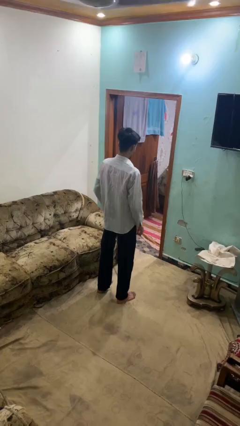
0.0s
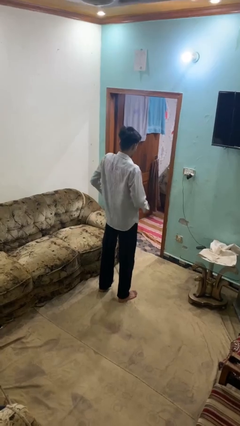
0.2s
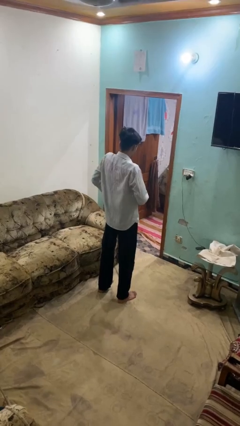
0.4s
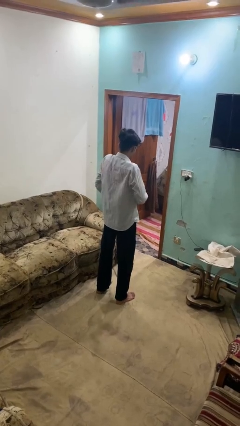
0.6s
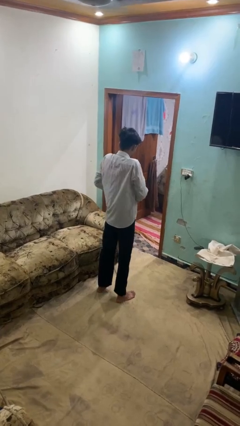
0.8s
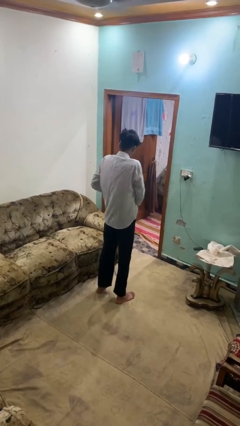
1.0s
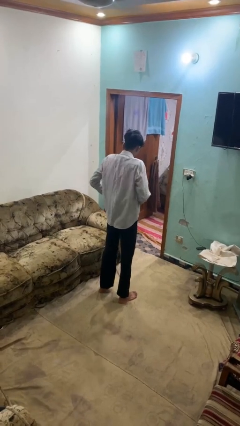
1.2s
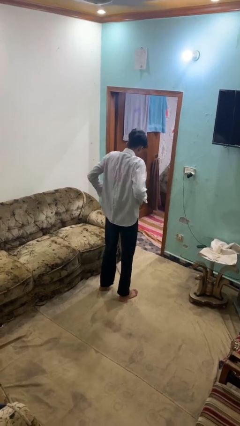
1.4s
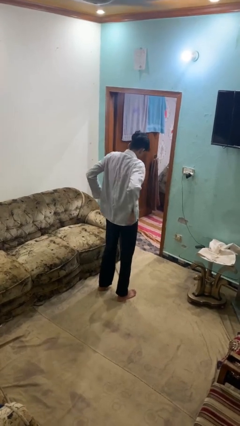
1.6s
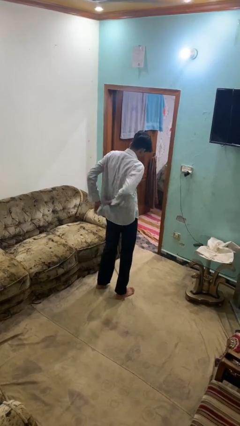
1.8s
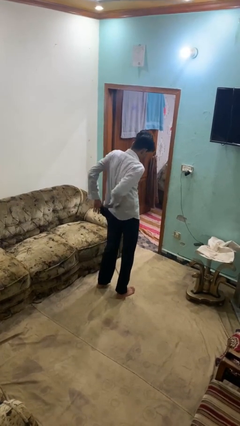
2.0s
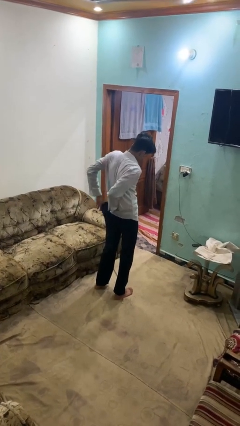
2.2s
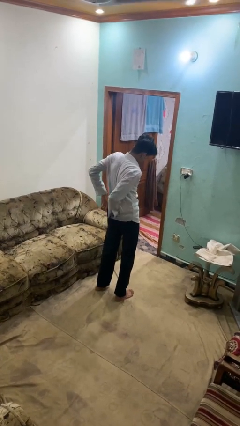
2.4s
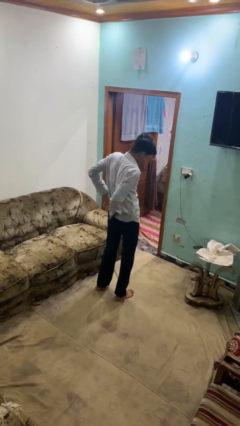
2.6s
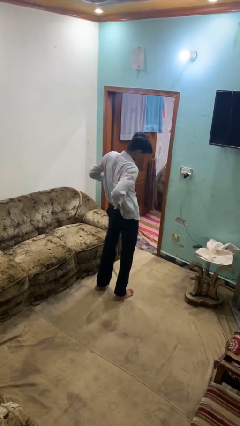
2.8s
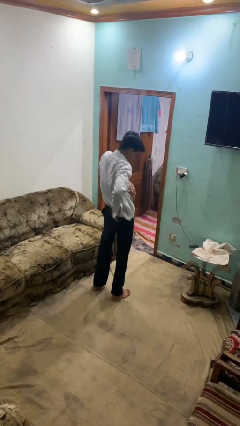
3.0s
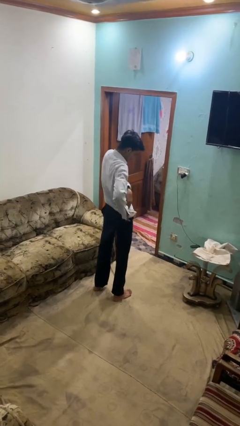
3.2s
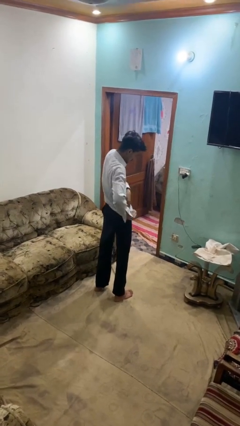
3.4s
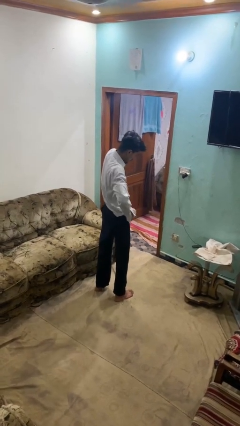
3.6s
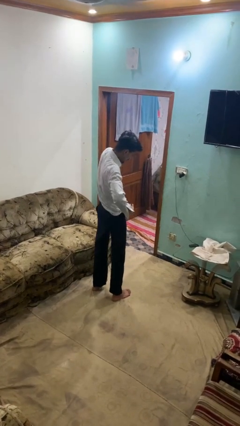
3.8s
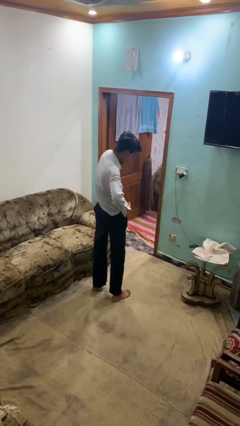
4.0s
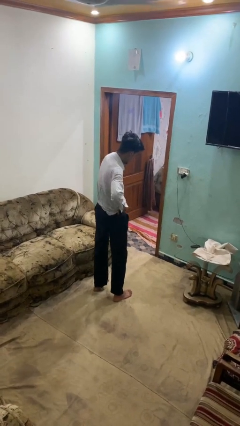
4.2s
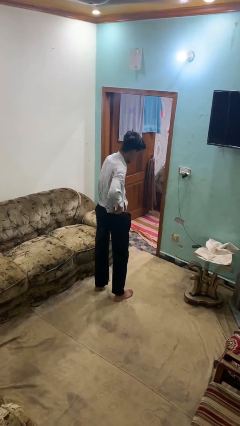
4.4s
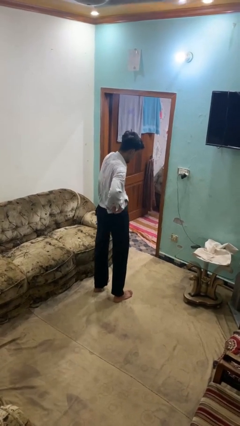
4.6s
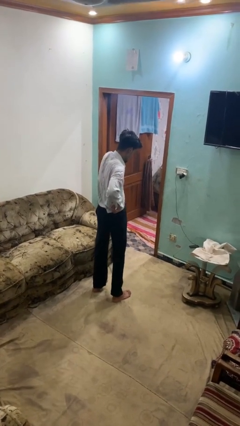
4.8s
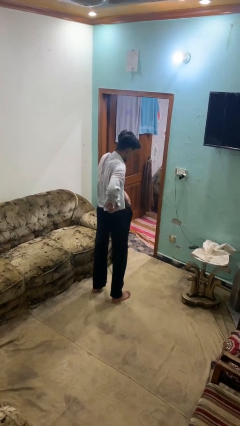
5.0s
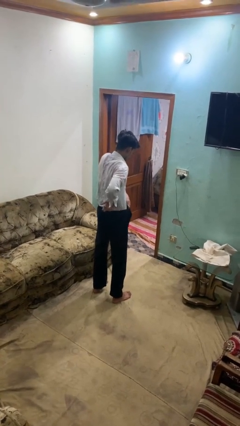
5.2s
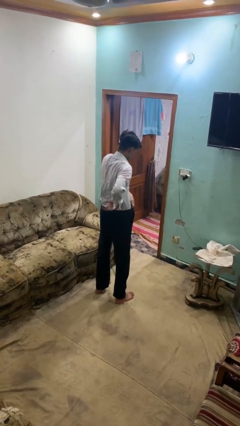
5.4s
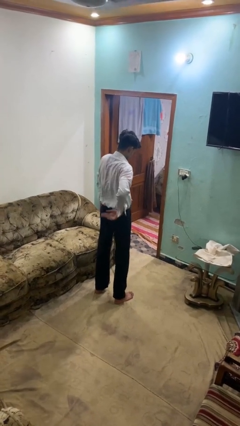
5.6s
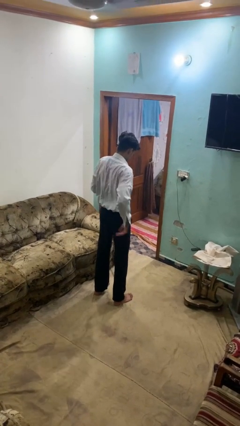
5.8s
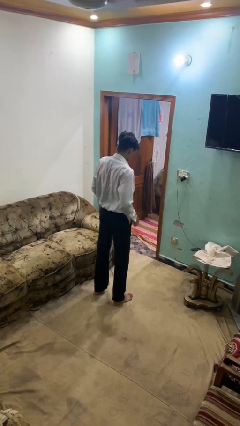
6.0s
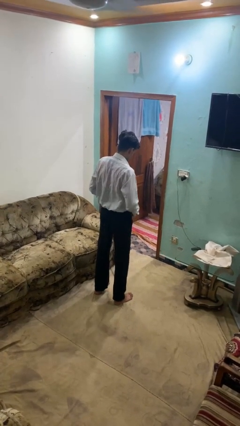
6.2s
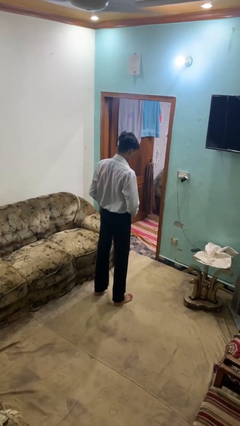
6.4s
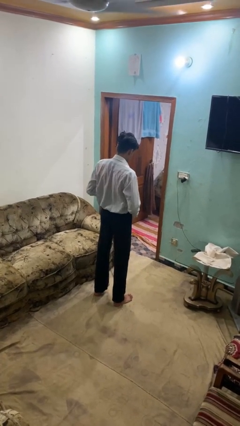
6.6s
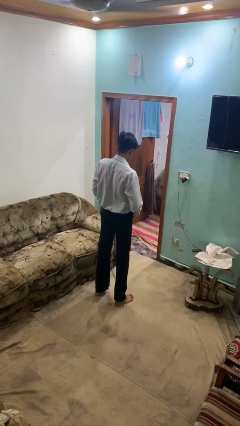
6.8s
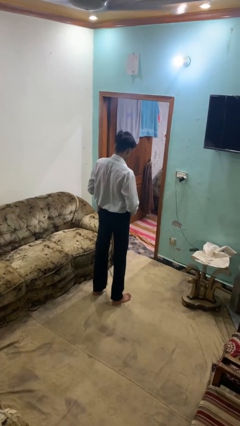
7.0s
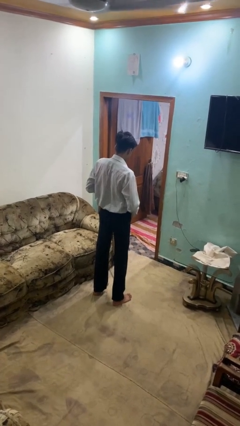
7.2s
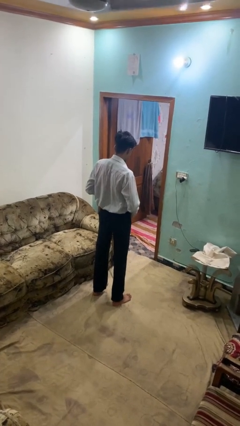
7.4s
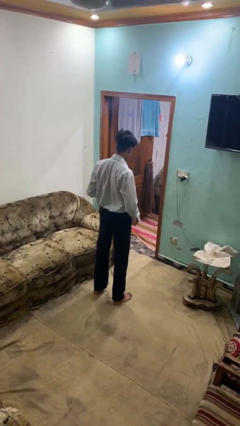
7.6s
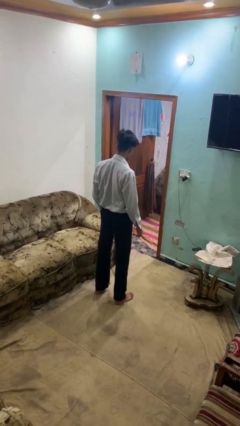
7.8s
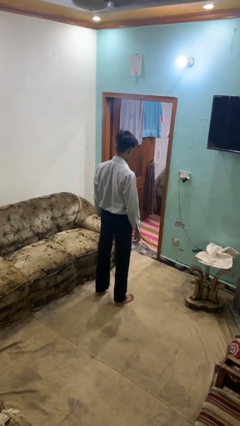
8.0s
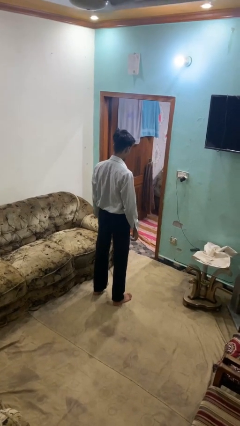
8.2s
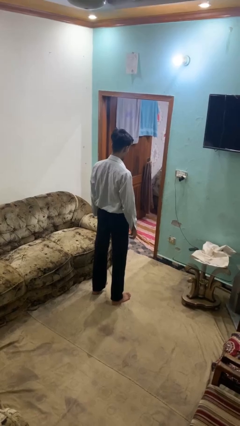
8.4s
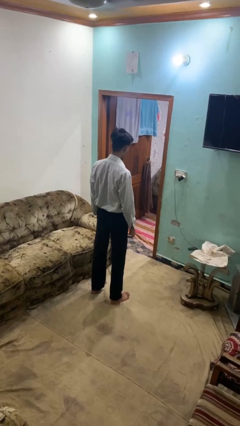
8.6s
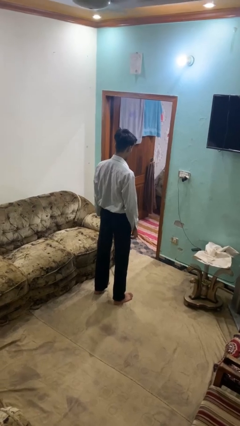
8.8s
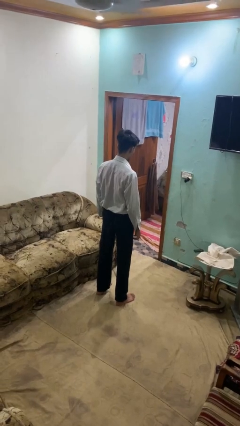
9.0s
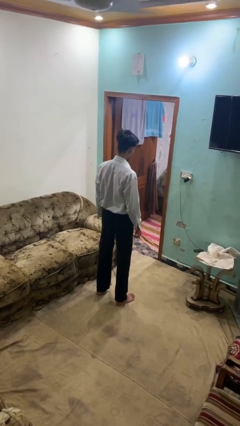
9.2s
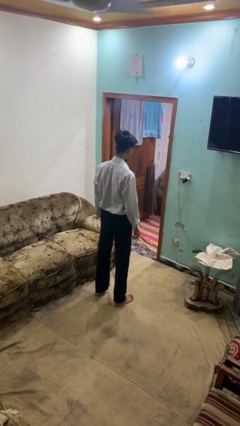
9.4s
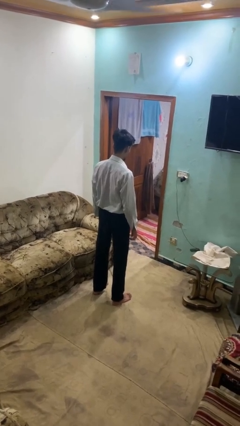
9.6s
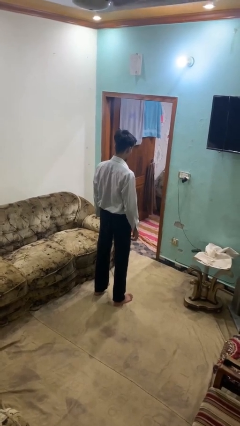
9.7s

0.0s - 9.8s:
person tucks in shirt

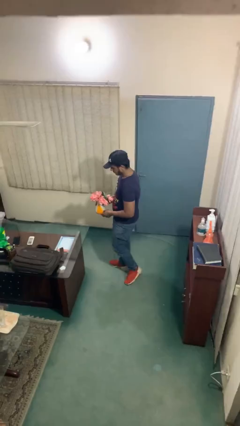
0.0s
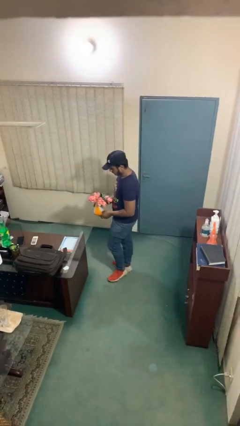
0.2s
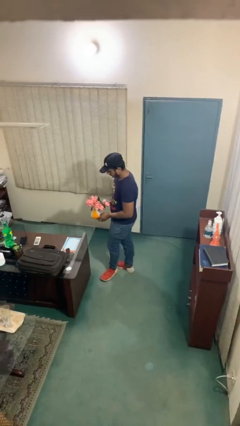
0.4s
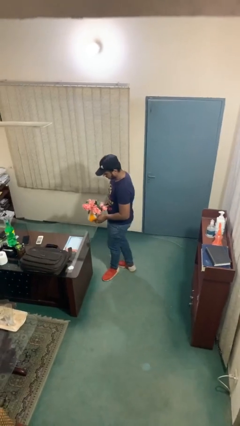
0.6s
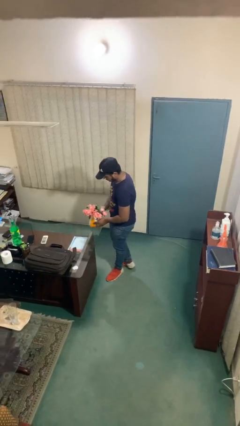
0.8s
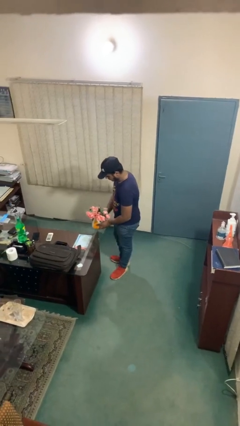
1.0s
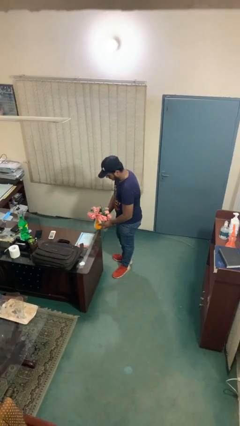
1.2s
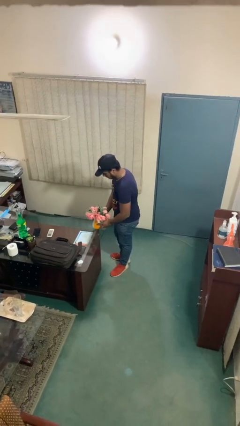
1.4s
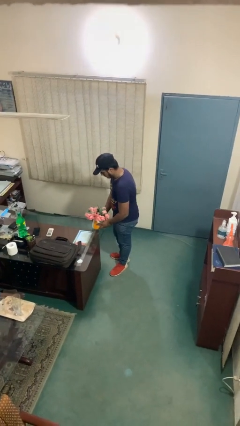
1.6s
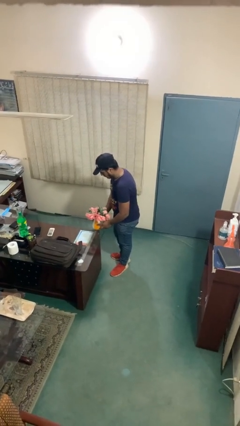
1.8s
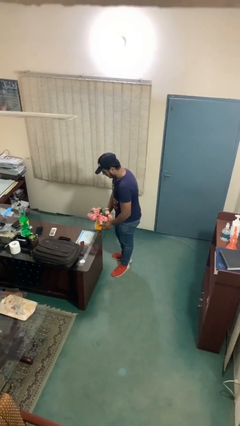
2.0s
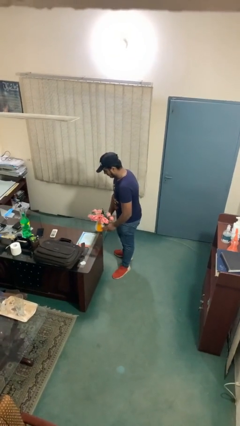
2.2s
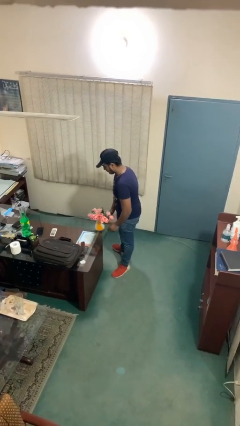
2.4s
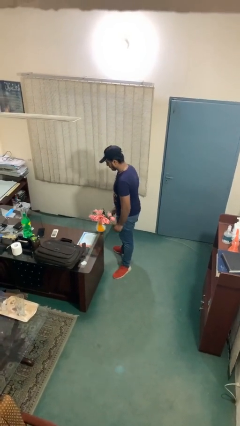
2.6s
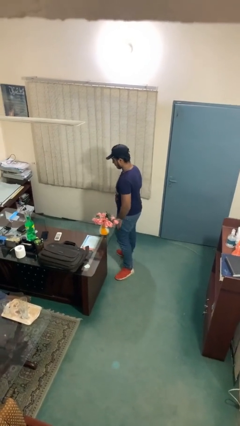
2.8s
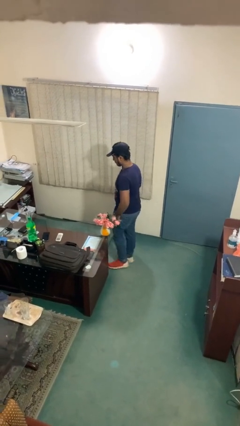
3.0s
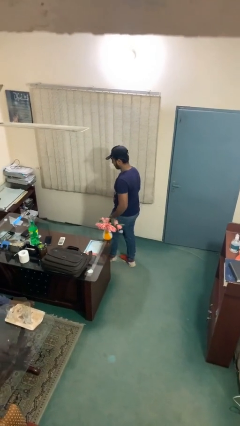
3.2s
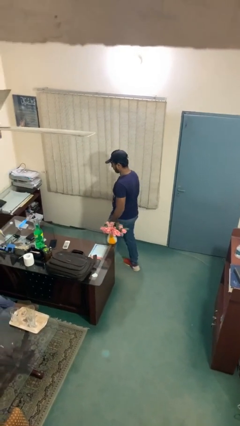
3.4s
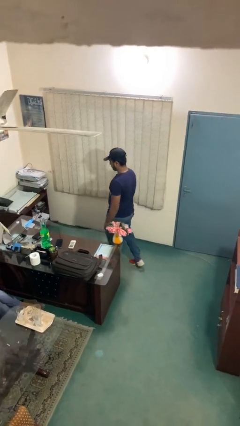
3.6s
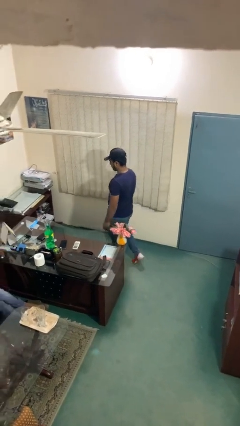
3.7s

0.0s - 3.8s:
person puts down object on table

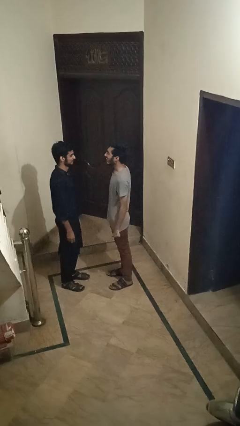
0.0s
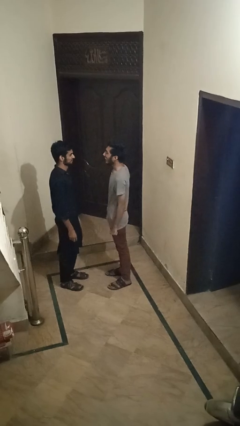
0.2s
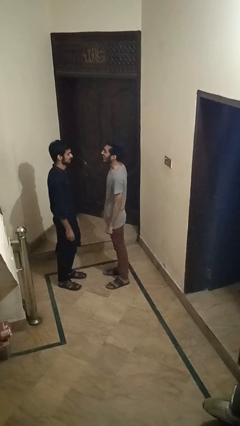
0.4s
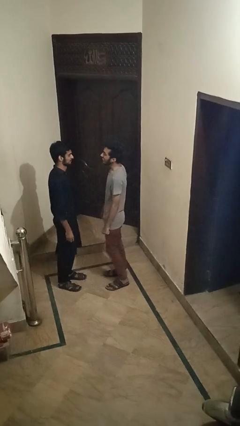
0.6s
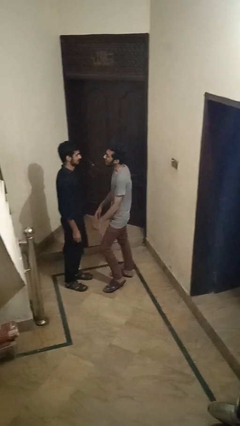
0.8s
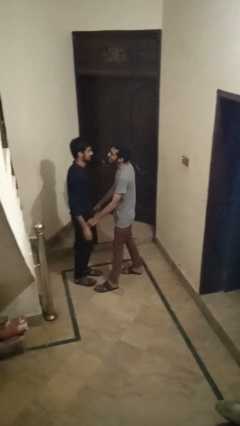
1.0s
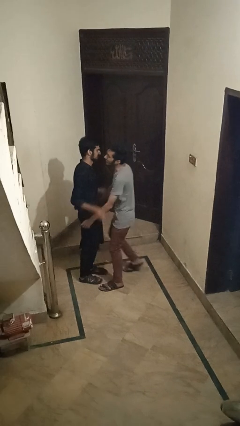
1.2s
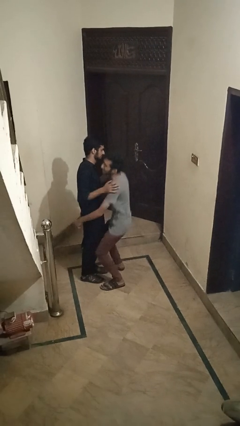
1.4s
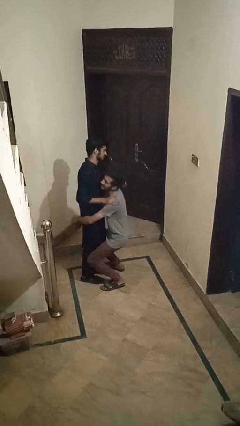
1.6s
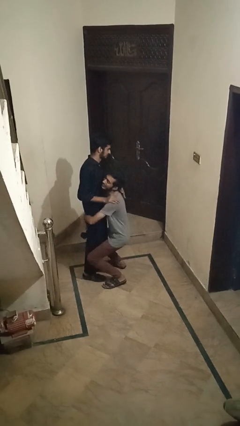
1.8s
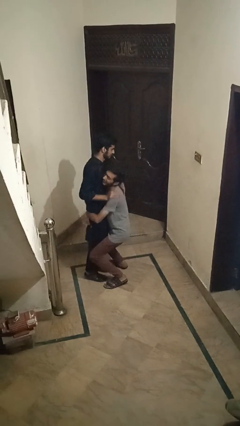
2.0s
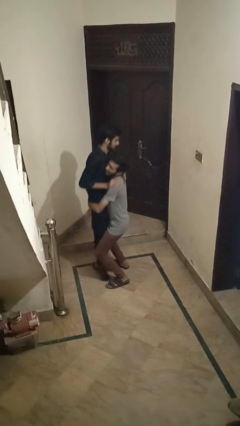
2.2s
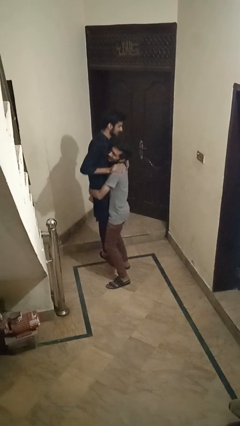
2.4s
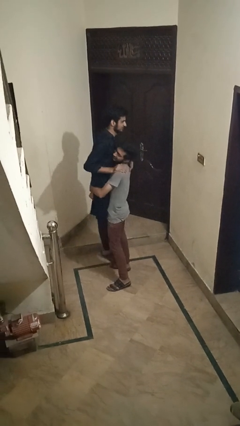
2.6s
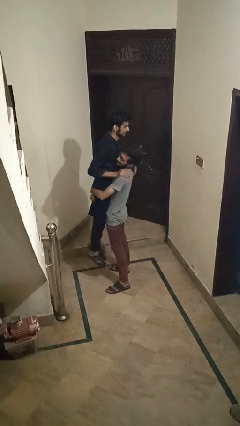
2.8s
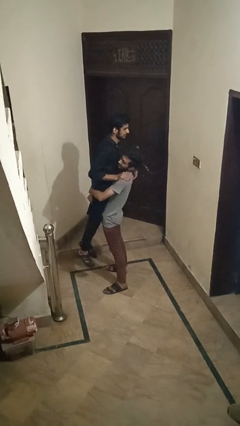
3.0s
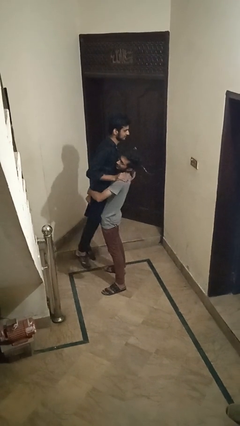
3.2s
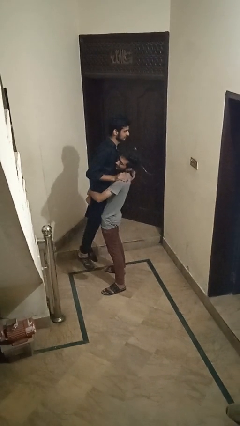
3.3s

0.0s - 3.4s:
person picks up person

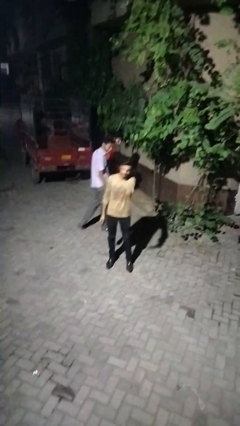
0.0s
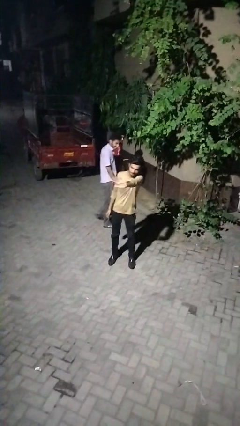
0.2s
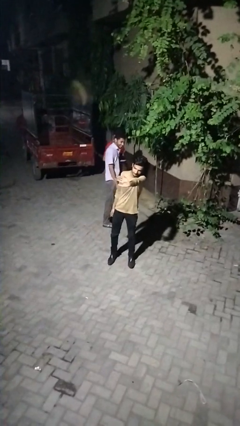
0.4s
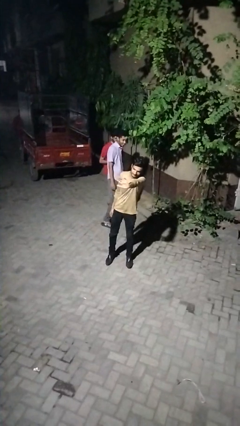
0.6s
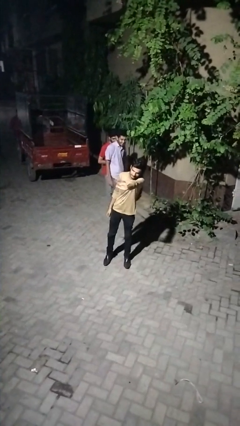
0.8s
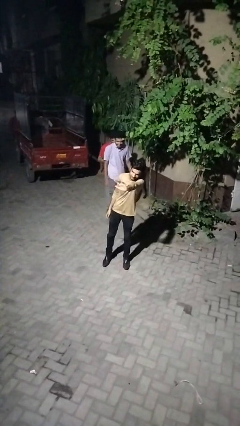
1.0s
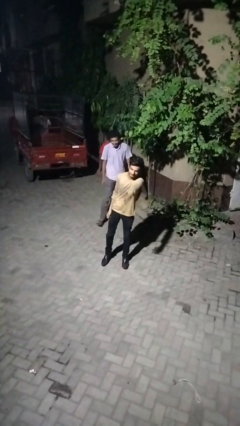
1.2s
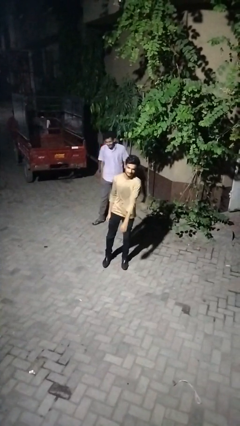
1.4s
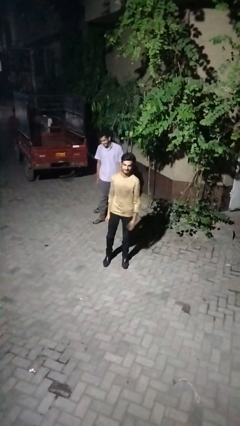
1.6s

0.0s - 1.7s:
person waves at person
